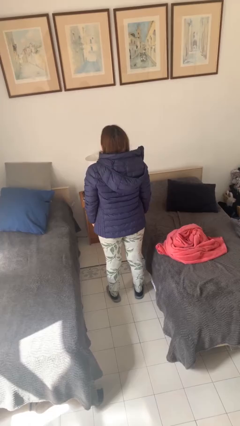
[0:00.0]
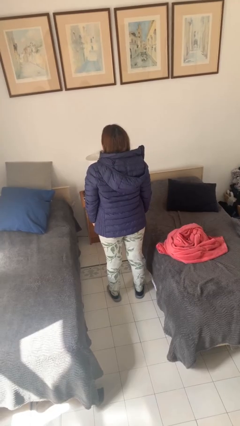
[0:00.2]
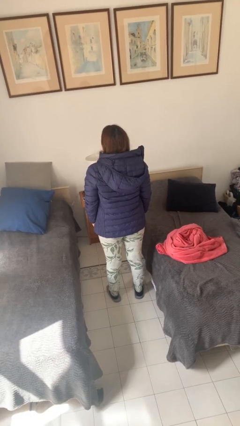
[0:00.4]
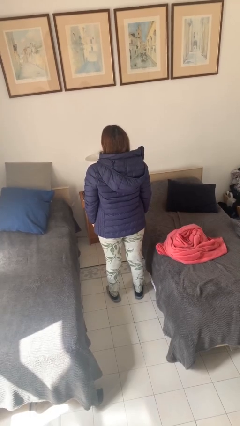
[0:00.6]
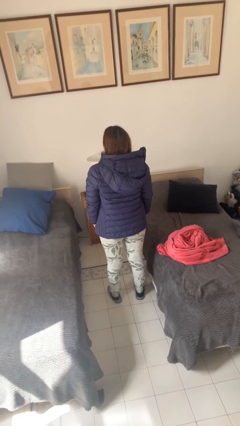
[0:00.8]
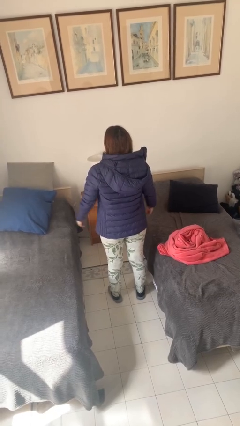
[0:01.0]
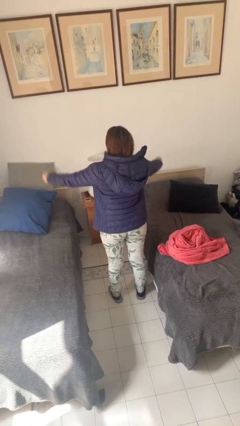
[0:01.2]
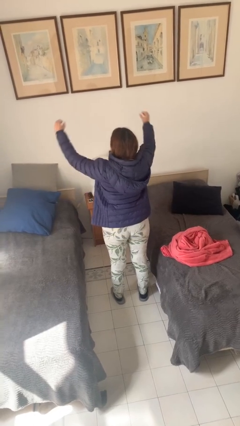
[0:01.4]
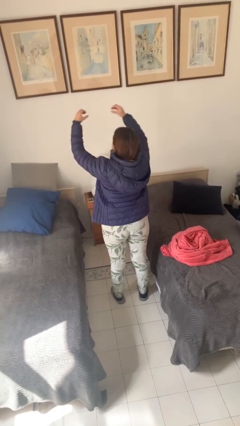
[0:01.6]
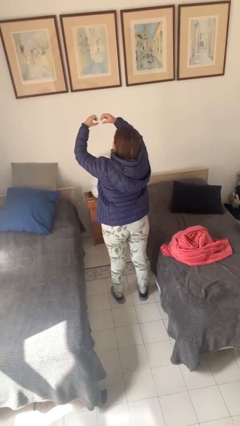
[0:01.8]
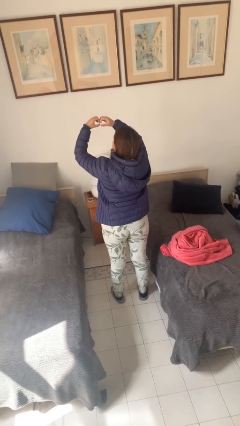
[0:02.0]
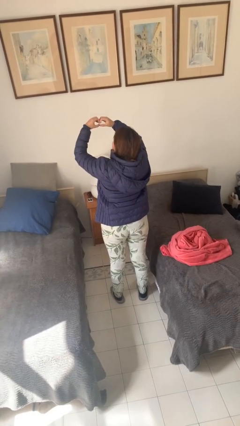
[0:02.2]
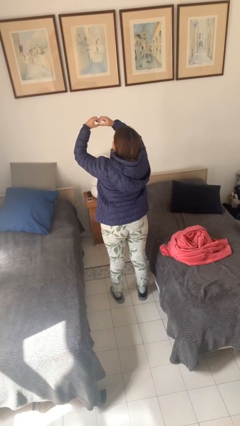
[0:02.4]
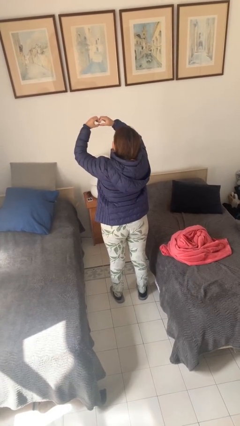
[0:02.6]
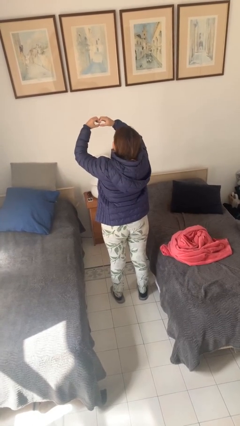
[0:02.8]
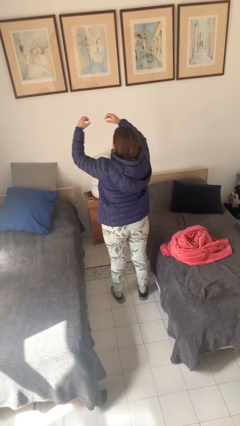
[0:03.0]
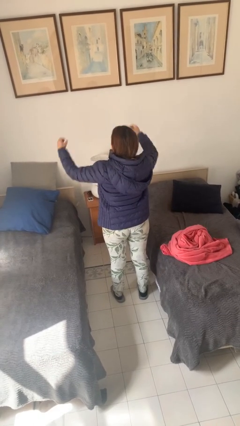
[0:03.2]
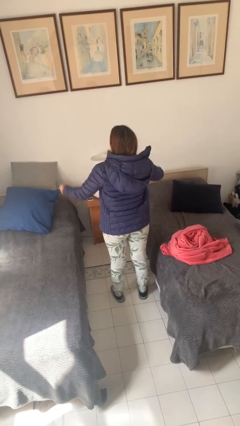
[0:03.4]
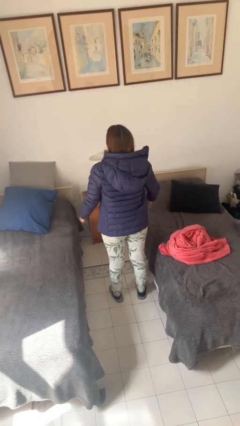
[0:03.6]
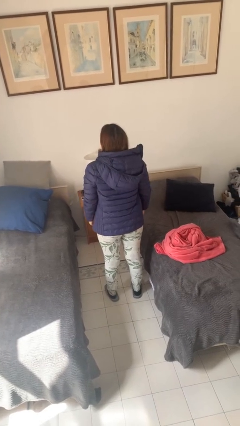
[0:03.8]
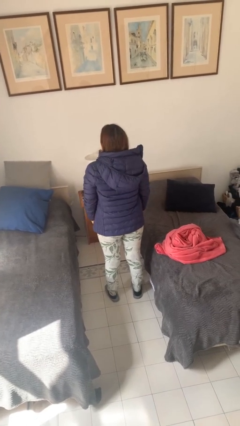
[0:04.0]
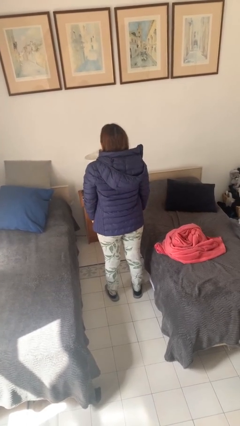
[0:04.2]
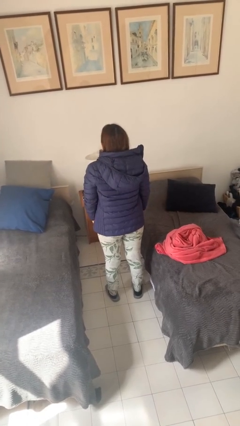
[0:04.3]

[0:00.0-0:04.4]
person gestures heart

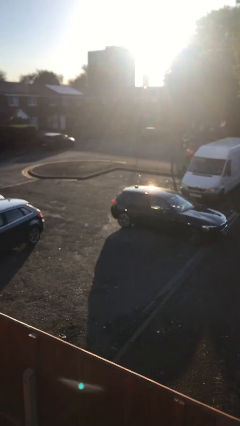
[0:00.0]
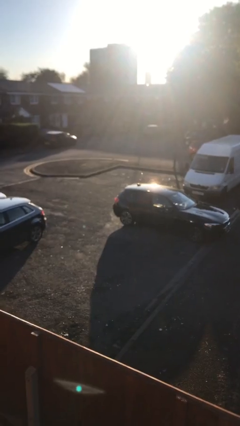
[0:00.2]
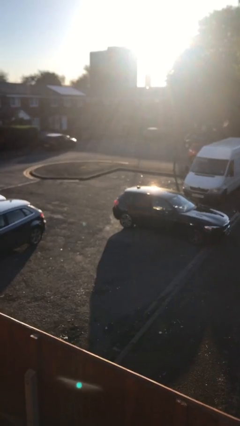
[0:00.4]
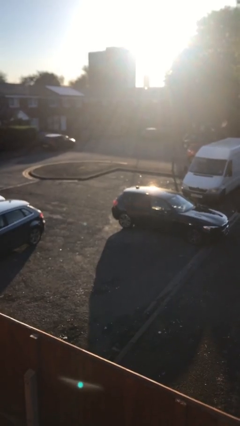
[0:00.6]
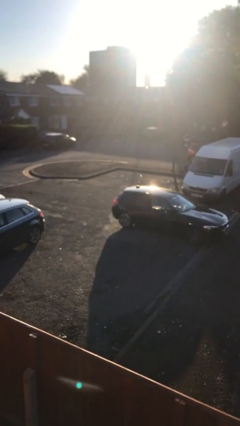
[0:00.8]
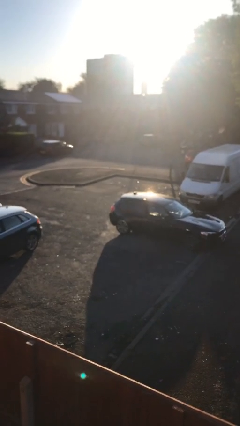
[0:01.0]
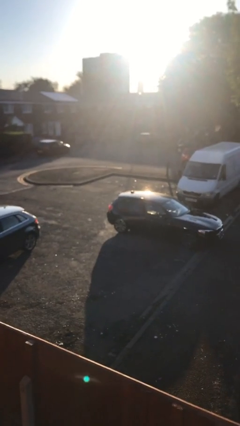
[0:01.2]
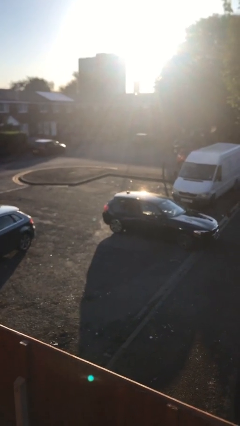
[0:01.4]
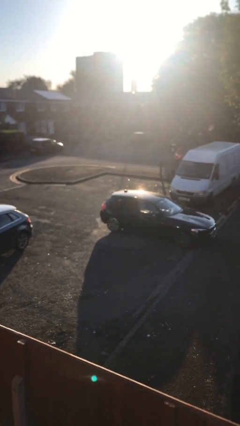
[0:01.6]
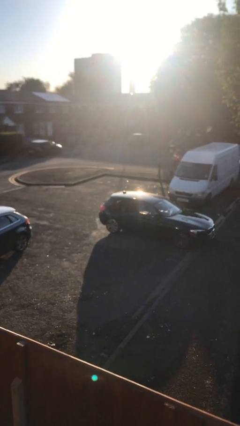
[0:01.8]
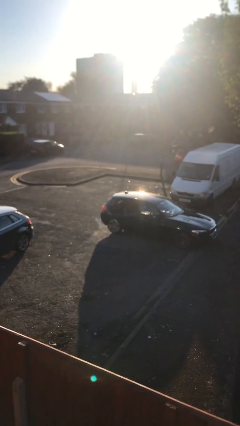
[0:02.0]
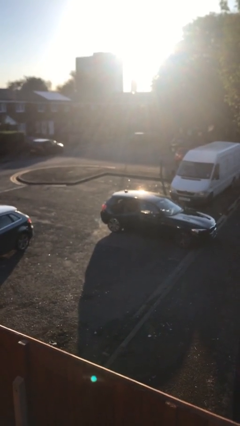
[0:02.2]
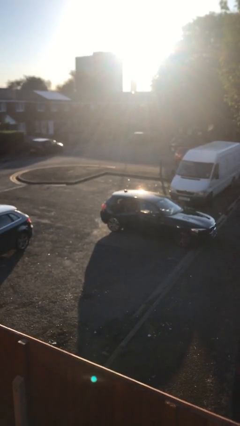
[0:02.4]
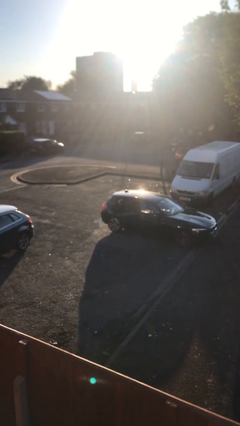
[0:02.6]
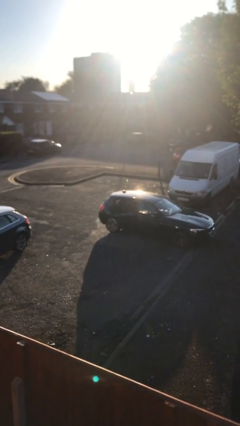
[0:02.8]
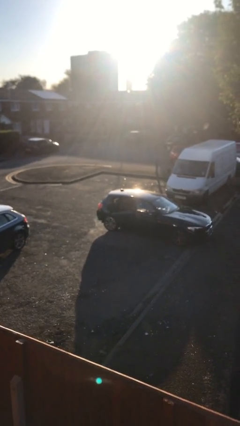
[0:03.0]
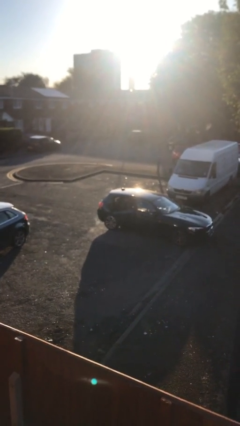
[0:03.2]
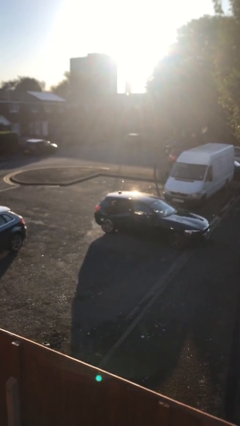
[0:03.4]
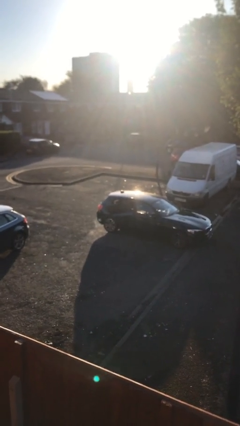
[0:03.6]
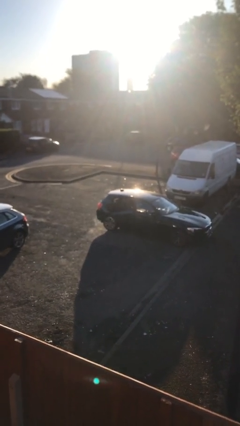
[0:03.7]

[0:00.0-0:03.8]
person opens car door

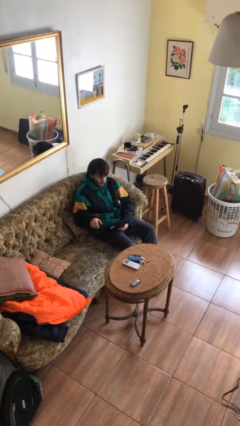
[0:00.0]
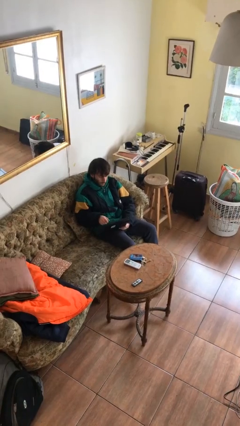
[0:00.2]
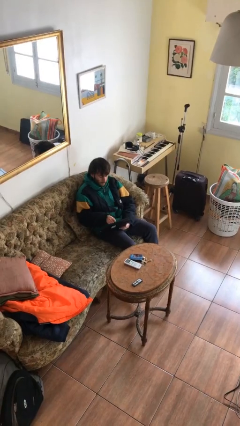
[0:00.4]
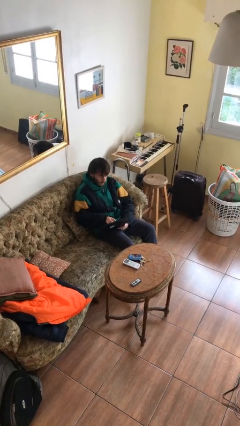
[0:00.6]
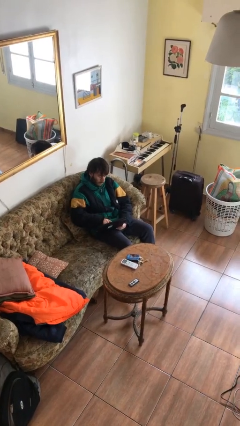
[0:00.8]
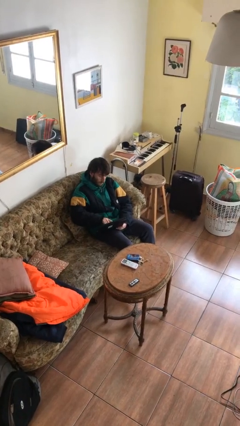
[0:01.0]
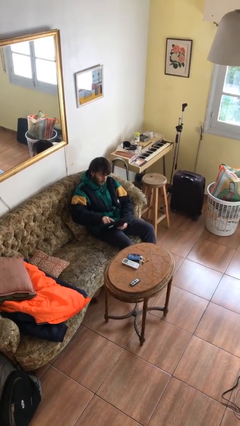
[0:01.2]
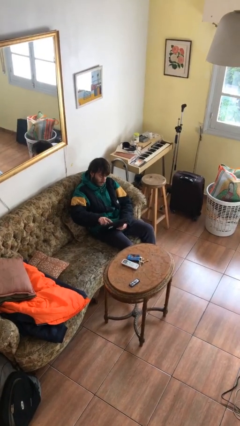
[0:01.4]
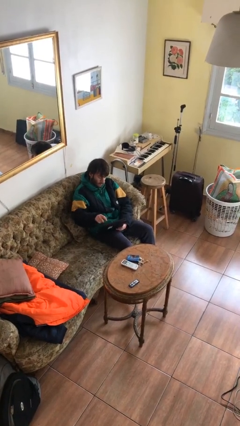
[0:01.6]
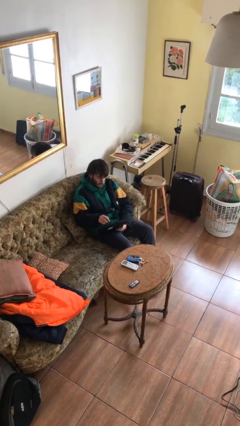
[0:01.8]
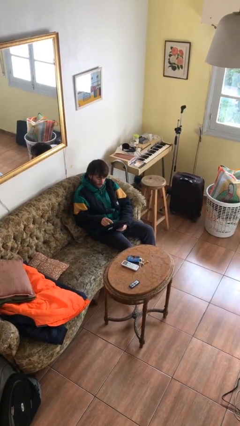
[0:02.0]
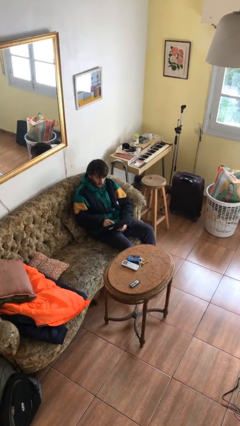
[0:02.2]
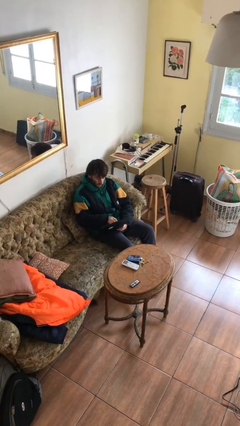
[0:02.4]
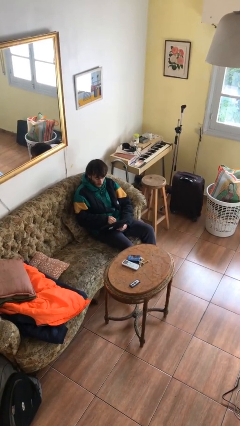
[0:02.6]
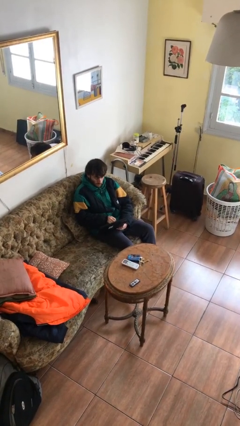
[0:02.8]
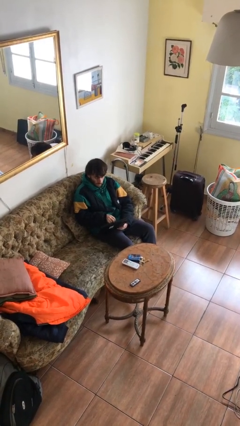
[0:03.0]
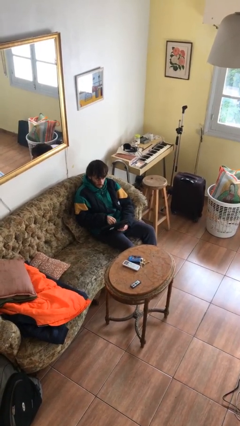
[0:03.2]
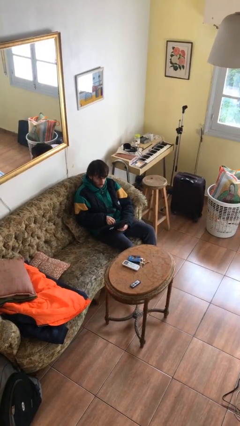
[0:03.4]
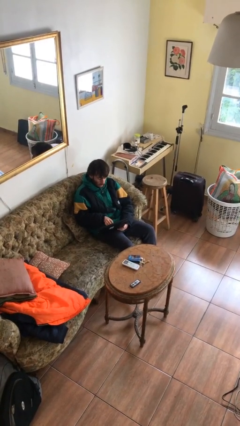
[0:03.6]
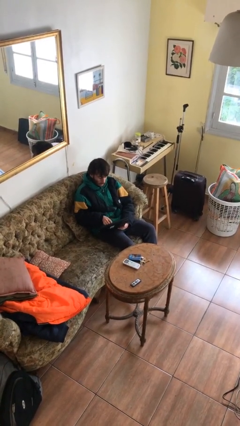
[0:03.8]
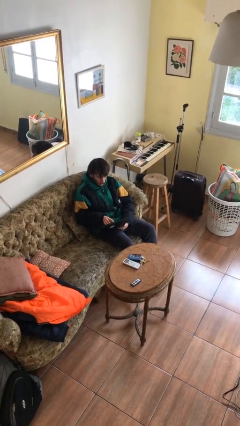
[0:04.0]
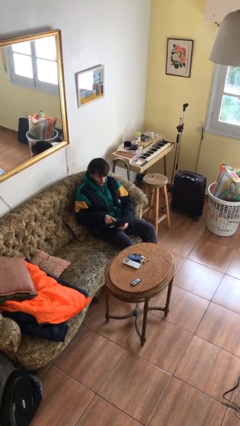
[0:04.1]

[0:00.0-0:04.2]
person interacts with tablet

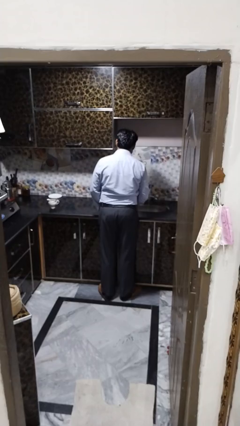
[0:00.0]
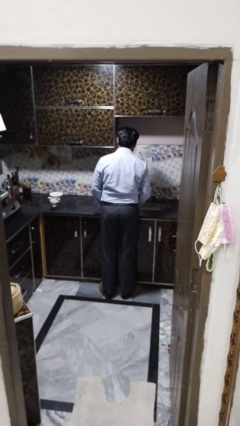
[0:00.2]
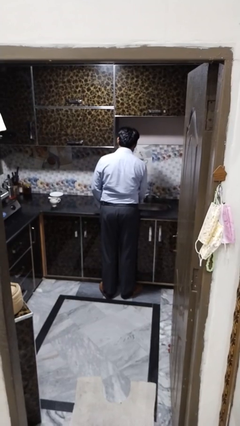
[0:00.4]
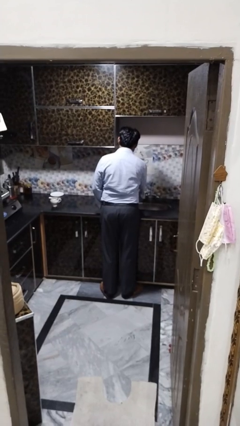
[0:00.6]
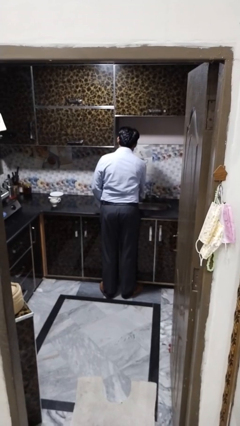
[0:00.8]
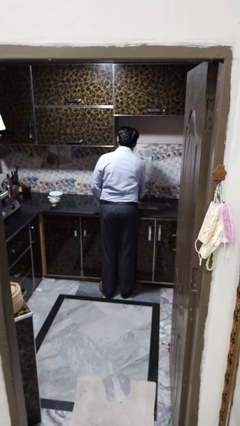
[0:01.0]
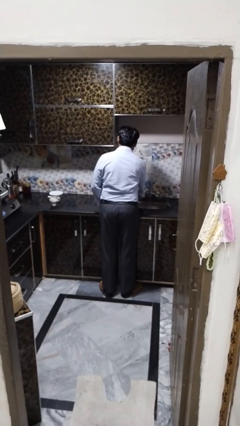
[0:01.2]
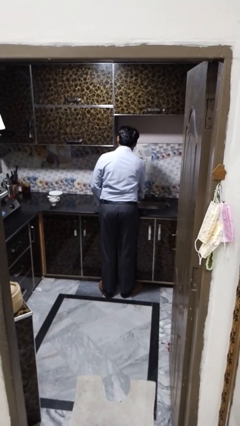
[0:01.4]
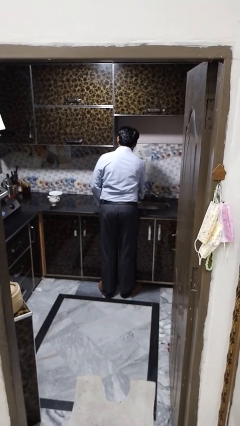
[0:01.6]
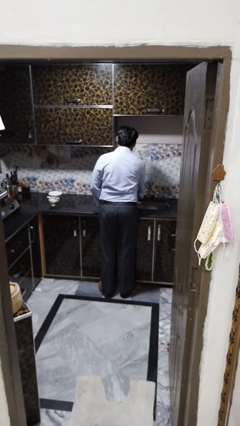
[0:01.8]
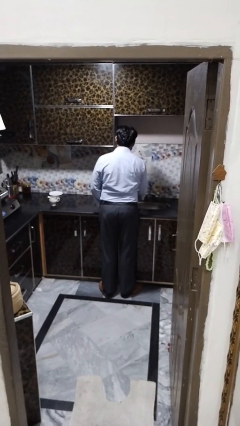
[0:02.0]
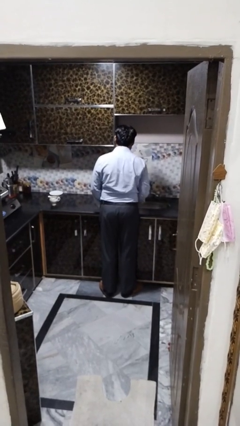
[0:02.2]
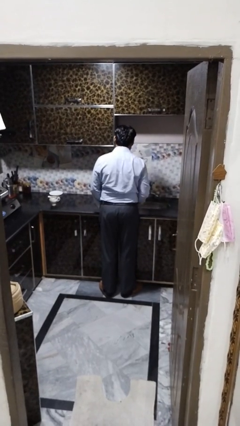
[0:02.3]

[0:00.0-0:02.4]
person turns off faucet

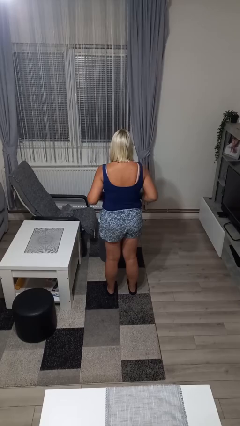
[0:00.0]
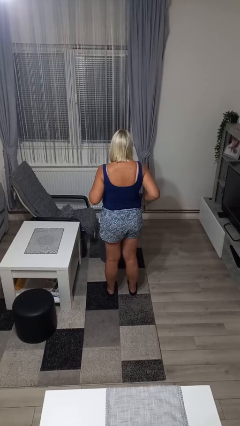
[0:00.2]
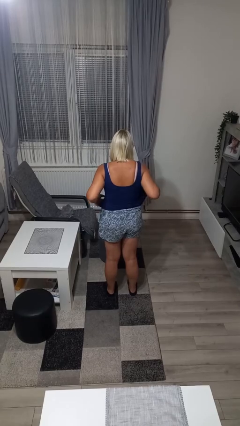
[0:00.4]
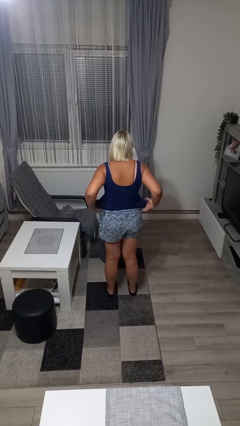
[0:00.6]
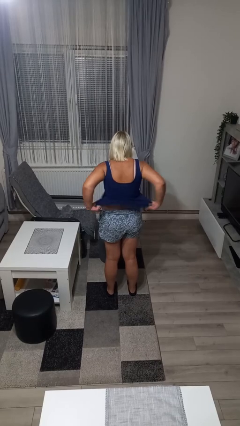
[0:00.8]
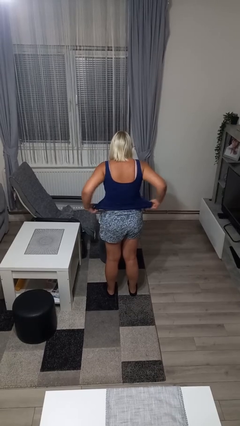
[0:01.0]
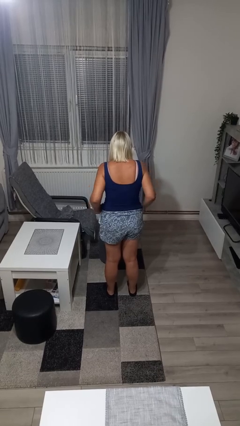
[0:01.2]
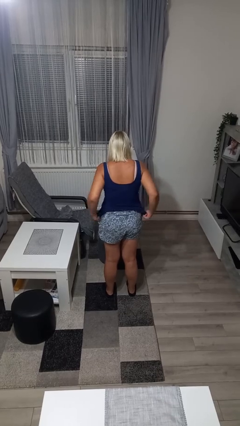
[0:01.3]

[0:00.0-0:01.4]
person untucks shirt

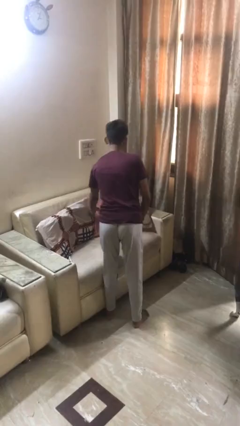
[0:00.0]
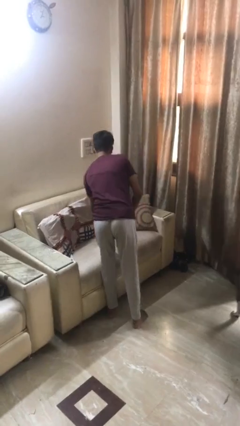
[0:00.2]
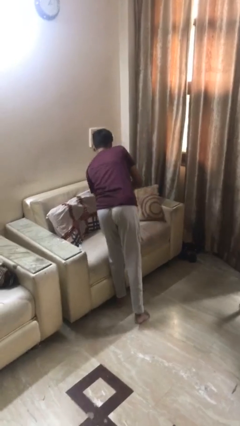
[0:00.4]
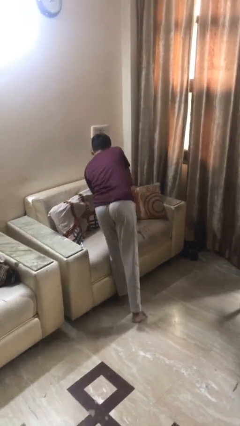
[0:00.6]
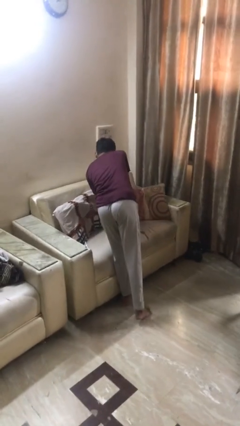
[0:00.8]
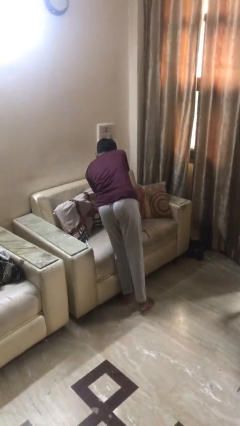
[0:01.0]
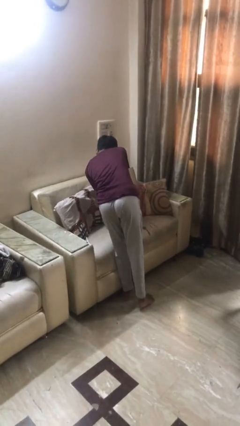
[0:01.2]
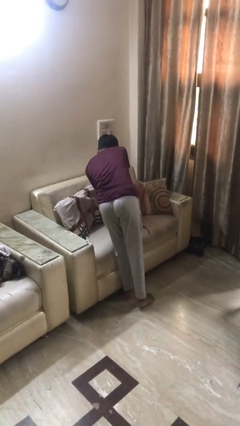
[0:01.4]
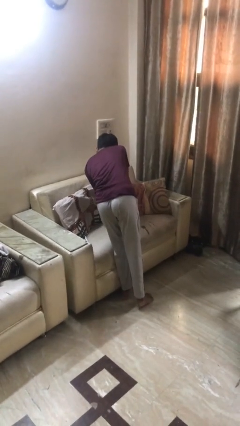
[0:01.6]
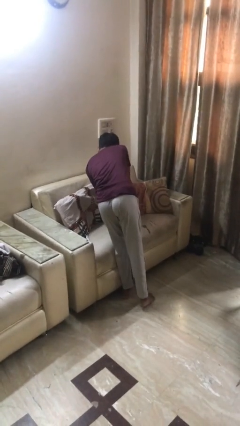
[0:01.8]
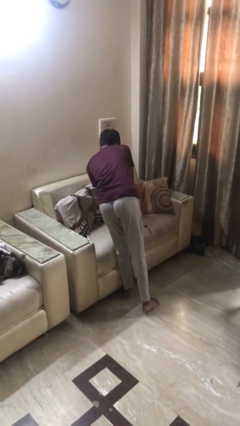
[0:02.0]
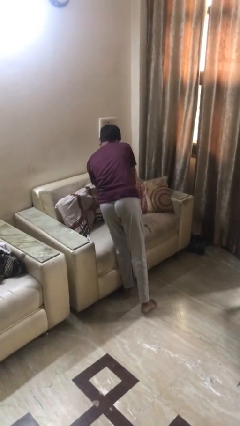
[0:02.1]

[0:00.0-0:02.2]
person searches in couch
